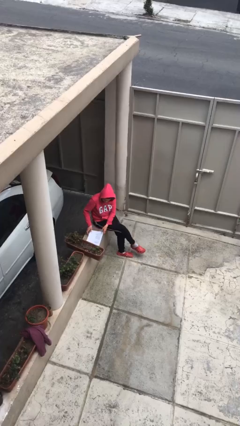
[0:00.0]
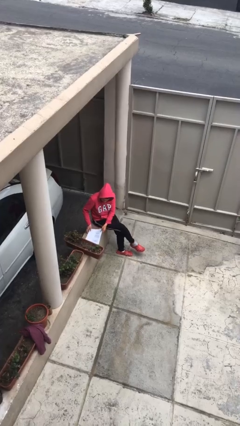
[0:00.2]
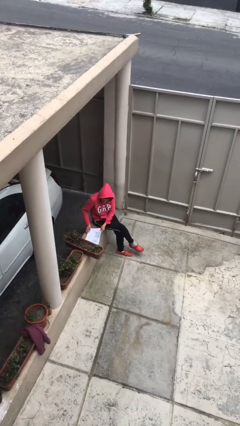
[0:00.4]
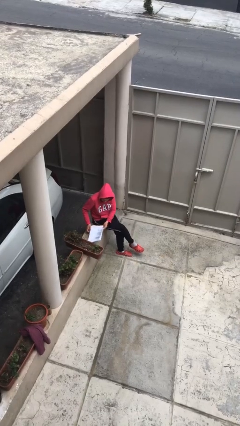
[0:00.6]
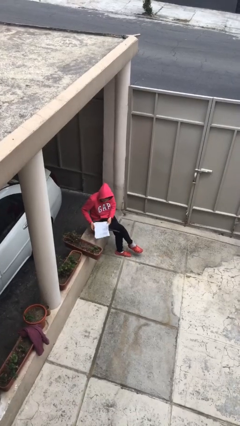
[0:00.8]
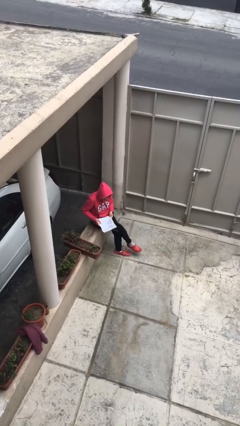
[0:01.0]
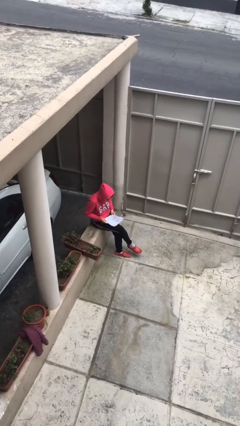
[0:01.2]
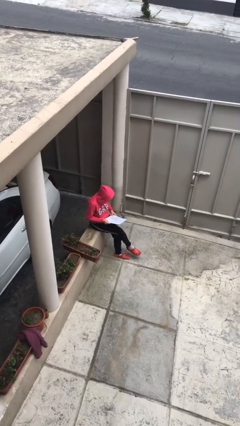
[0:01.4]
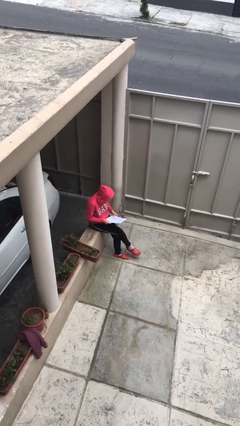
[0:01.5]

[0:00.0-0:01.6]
person picks up object from table

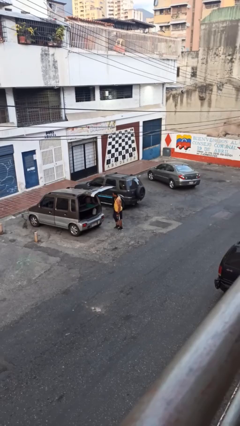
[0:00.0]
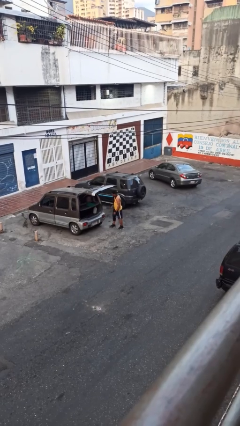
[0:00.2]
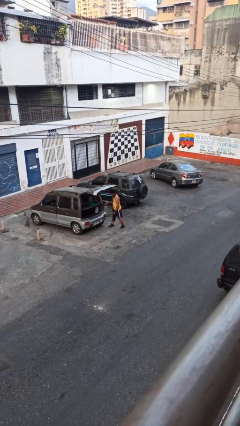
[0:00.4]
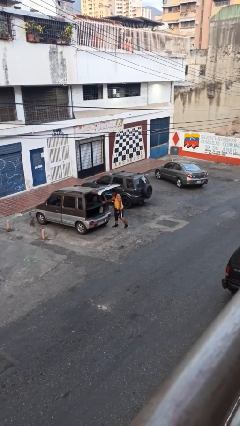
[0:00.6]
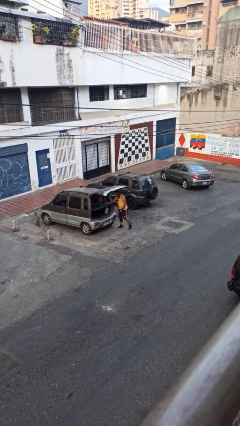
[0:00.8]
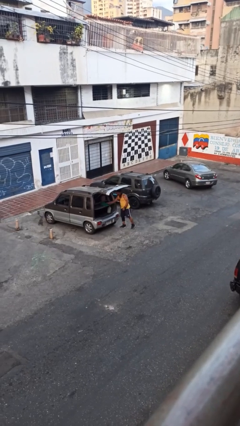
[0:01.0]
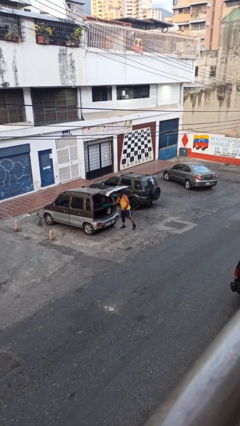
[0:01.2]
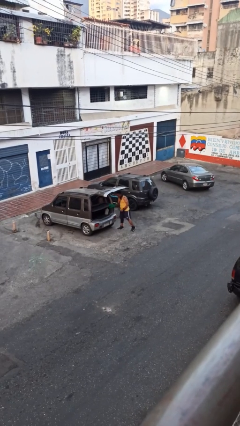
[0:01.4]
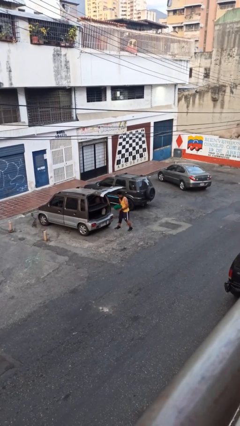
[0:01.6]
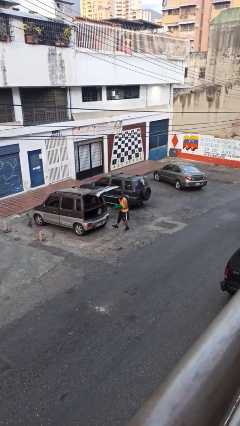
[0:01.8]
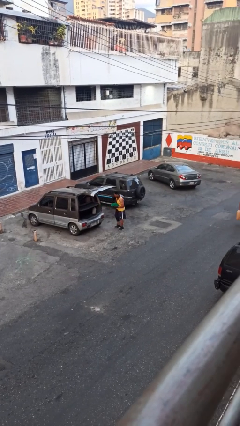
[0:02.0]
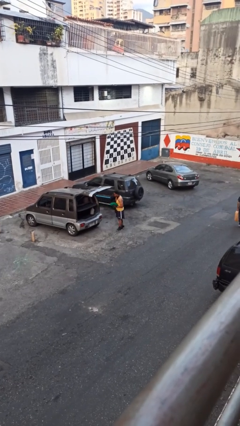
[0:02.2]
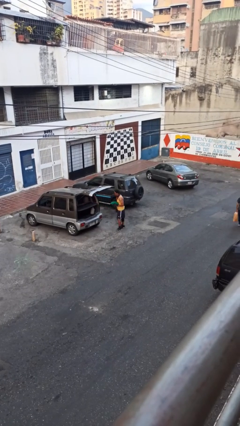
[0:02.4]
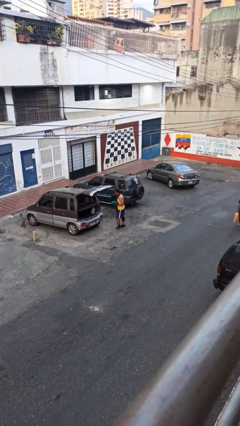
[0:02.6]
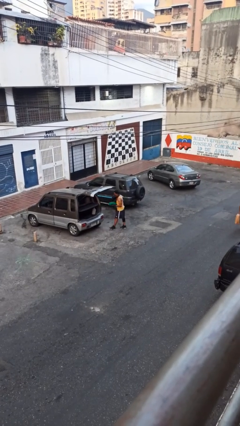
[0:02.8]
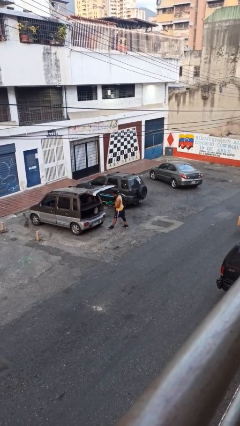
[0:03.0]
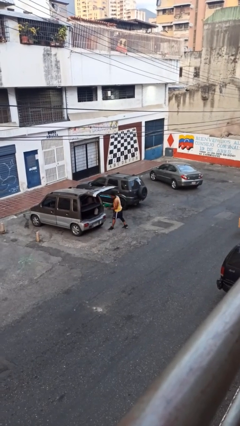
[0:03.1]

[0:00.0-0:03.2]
person unloads car

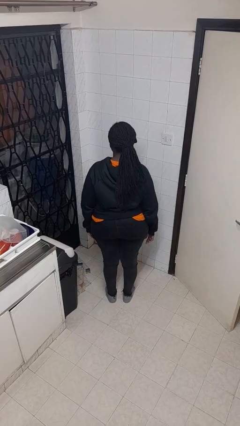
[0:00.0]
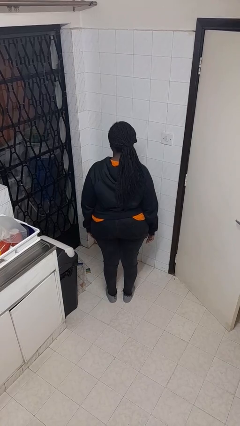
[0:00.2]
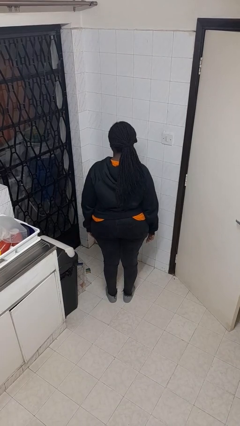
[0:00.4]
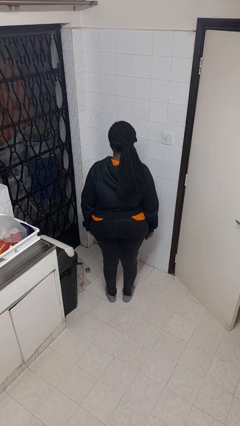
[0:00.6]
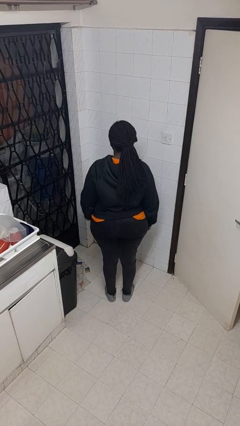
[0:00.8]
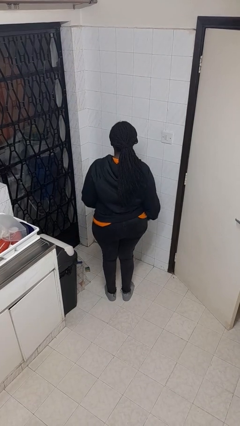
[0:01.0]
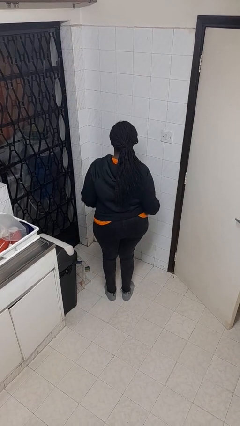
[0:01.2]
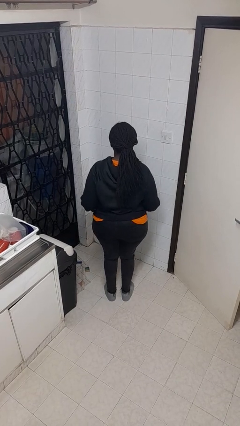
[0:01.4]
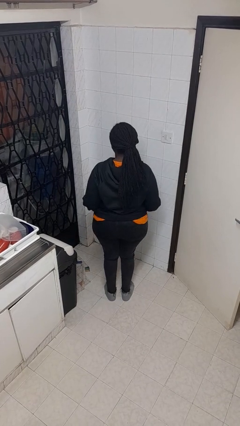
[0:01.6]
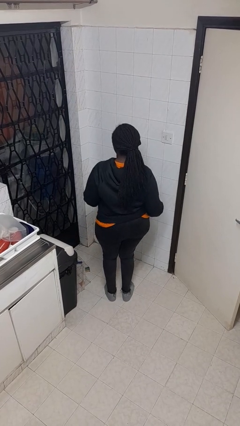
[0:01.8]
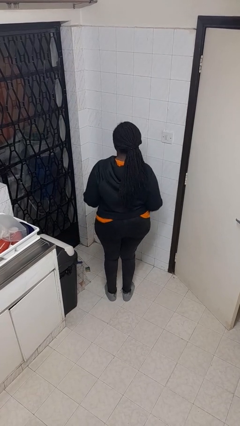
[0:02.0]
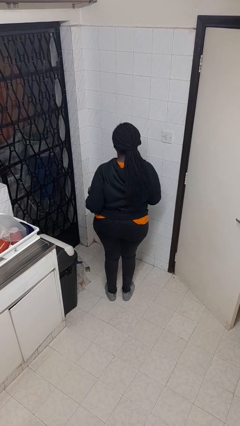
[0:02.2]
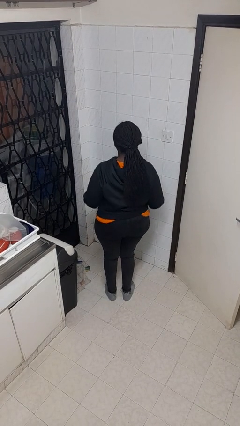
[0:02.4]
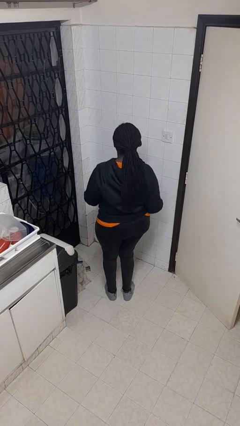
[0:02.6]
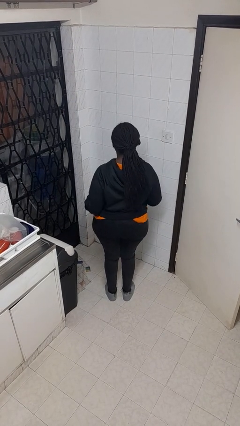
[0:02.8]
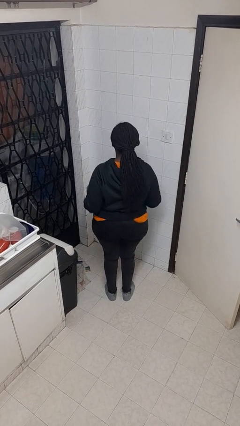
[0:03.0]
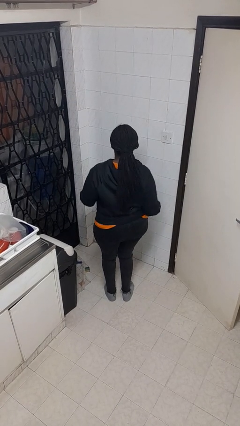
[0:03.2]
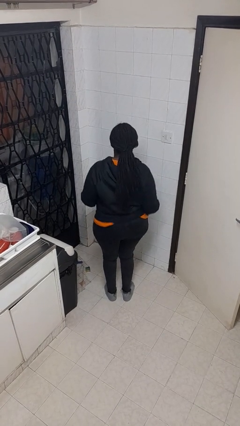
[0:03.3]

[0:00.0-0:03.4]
person dances in place

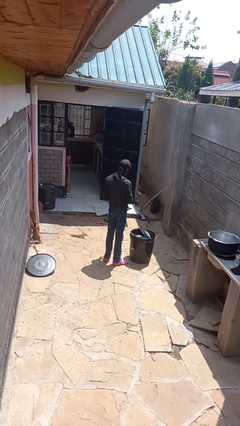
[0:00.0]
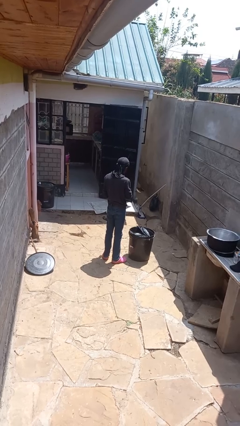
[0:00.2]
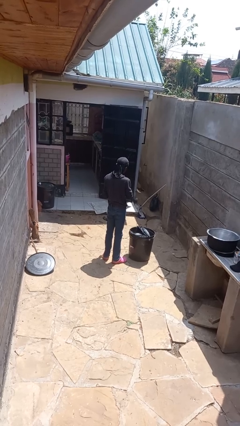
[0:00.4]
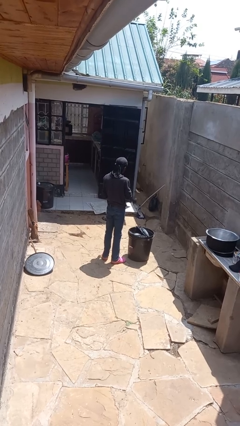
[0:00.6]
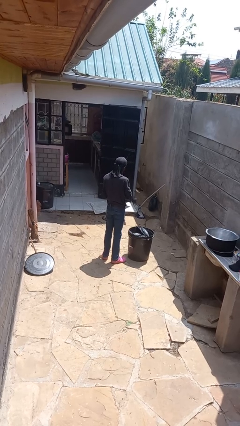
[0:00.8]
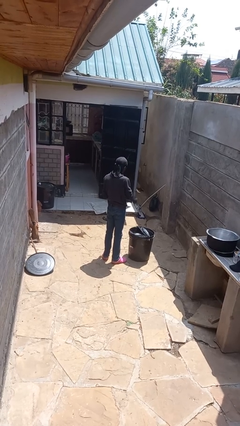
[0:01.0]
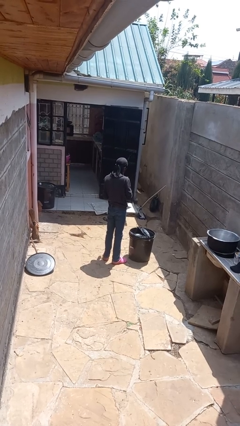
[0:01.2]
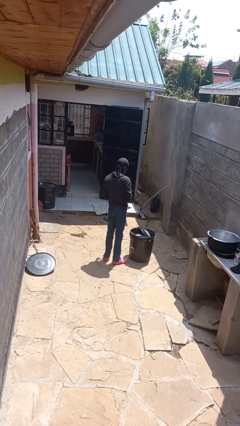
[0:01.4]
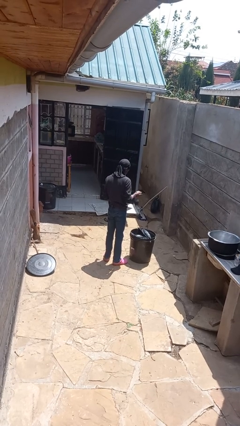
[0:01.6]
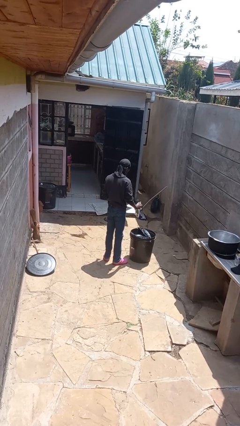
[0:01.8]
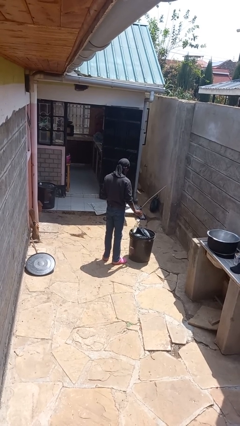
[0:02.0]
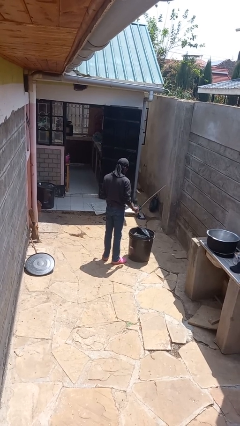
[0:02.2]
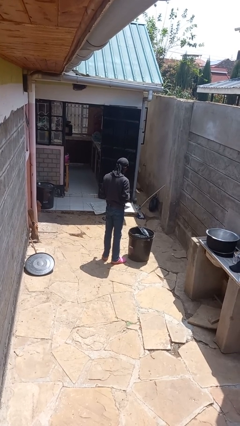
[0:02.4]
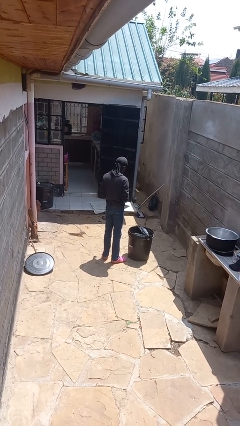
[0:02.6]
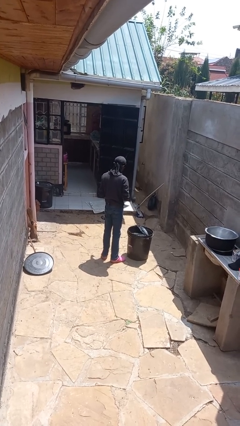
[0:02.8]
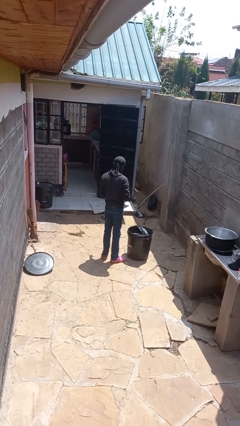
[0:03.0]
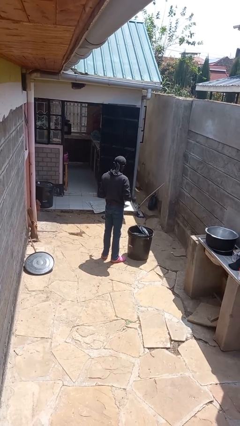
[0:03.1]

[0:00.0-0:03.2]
person discards trash

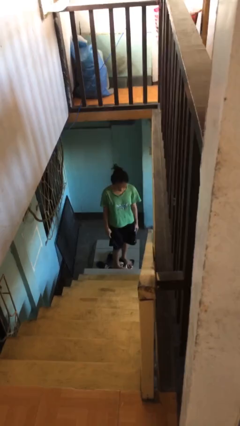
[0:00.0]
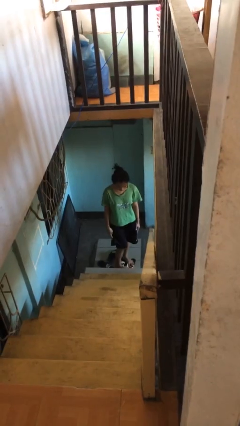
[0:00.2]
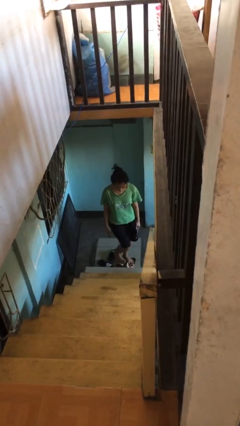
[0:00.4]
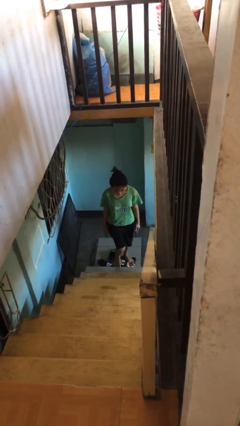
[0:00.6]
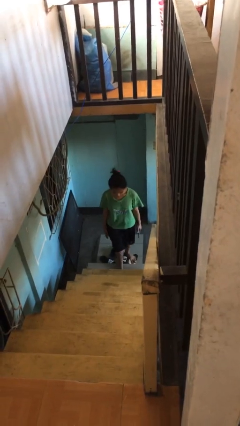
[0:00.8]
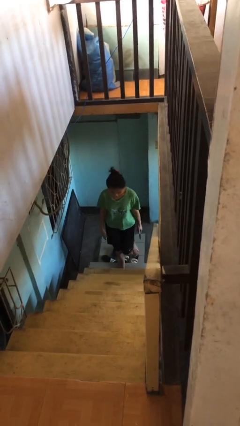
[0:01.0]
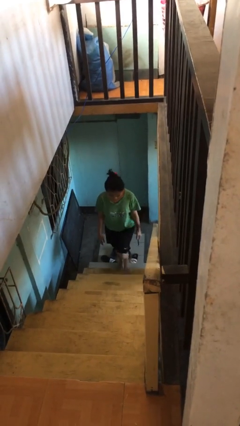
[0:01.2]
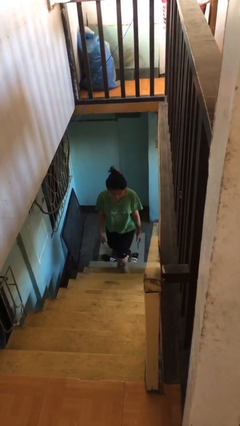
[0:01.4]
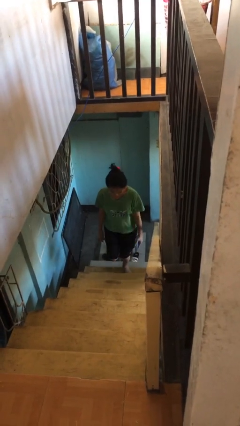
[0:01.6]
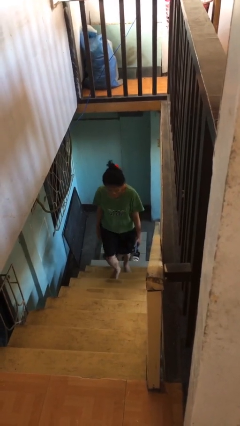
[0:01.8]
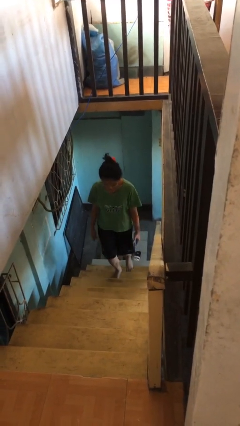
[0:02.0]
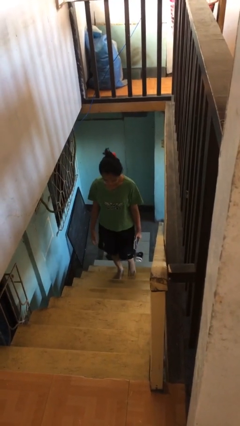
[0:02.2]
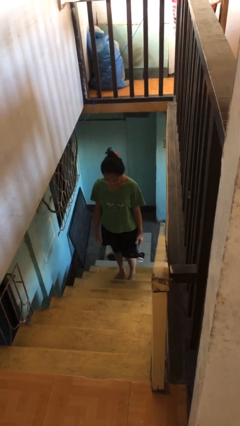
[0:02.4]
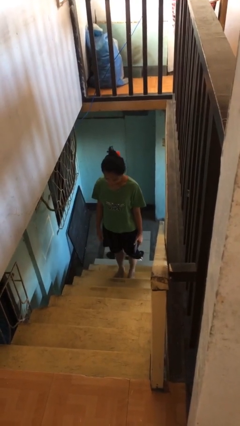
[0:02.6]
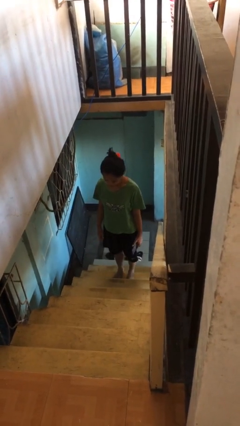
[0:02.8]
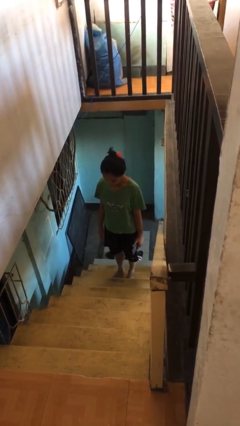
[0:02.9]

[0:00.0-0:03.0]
person climbs up stairs

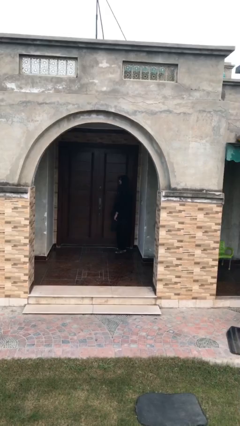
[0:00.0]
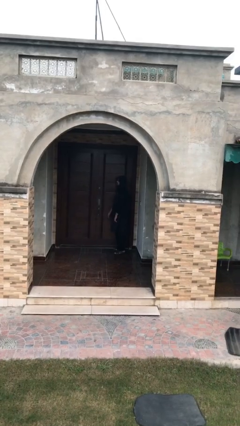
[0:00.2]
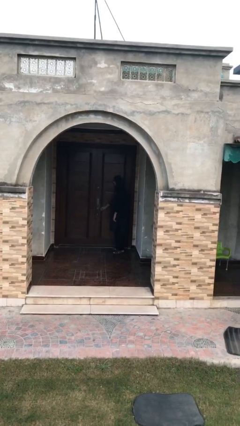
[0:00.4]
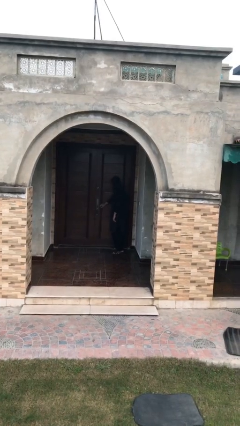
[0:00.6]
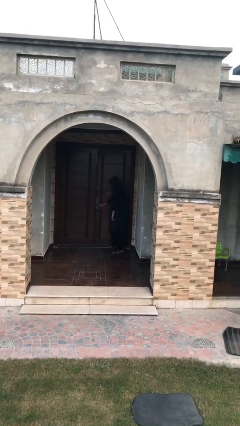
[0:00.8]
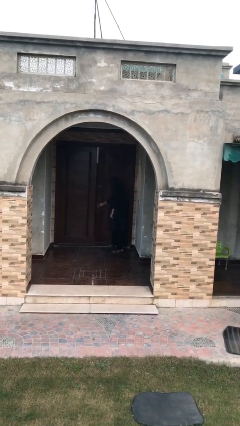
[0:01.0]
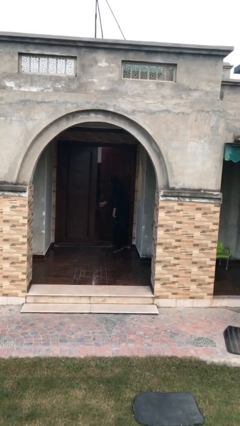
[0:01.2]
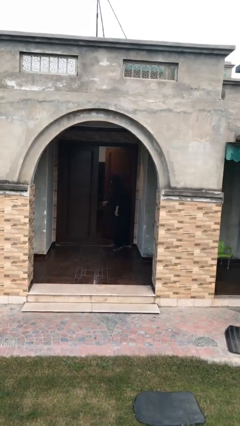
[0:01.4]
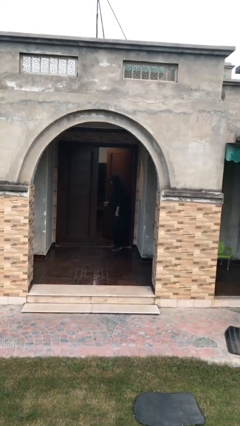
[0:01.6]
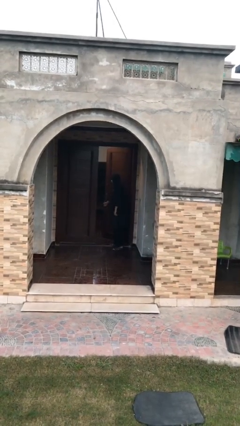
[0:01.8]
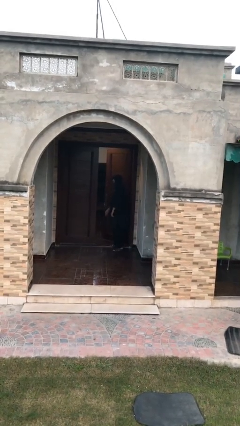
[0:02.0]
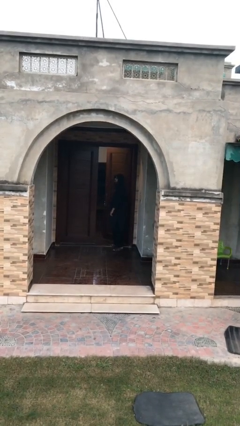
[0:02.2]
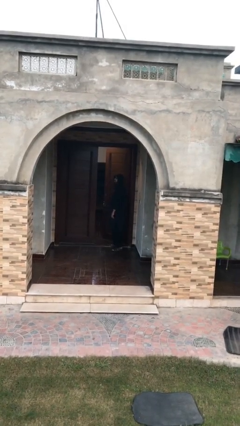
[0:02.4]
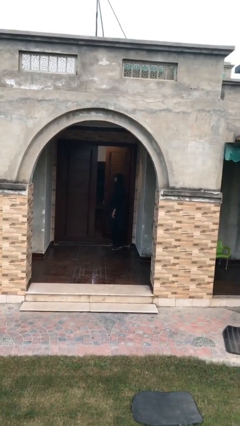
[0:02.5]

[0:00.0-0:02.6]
person opens facility door

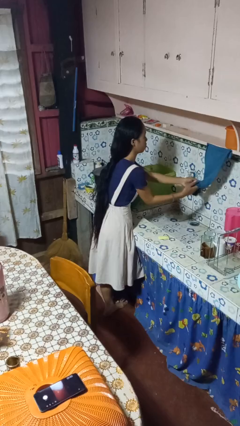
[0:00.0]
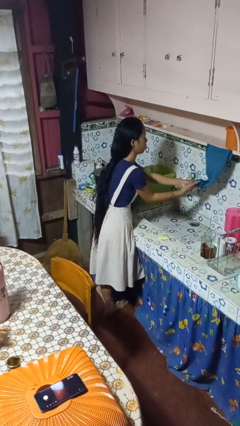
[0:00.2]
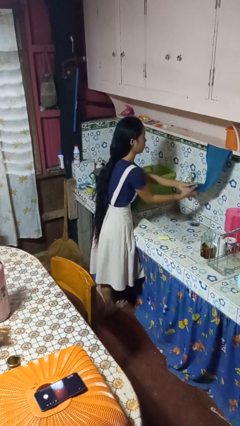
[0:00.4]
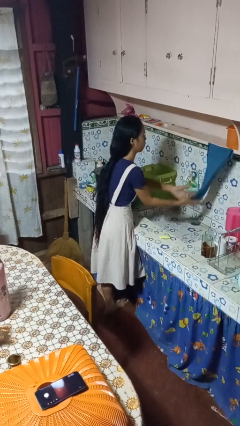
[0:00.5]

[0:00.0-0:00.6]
person dries hands with towel
